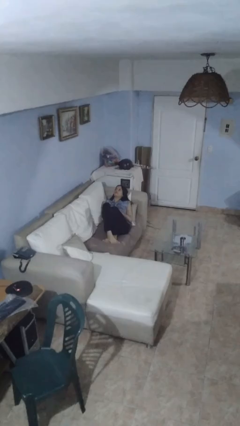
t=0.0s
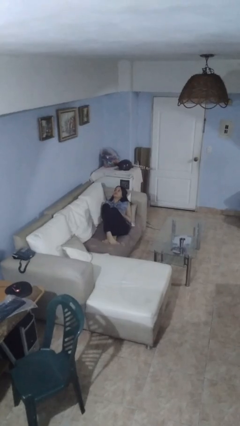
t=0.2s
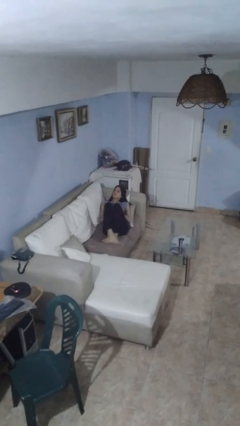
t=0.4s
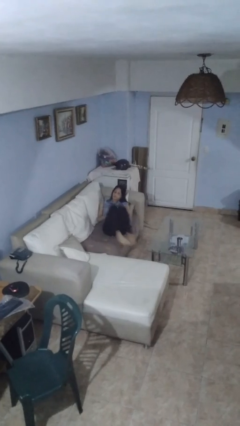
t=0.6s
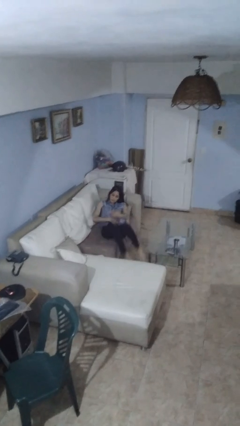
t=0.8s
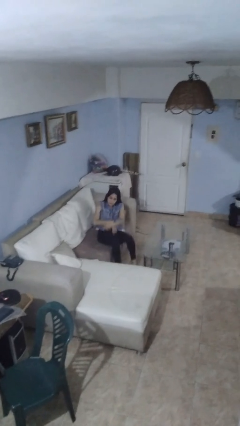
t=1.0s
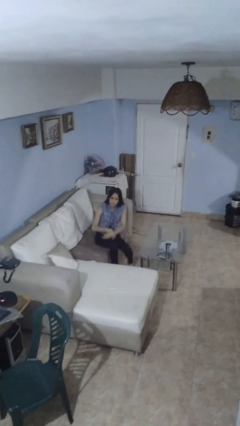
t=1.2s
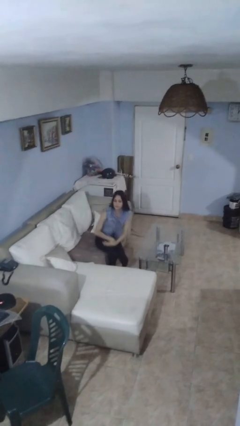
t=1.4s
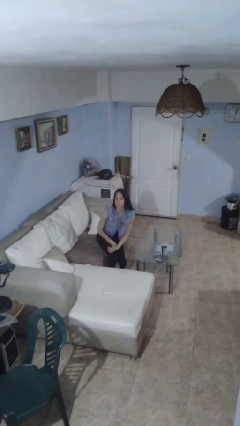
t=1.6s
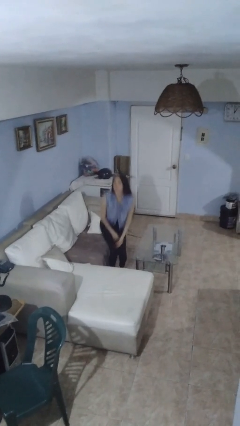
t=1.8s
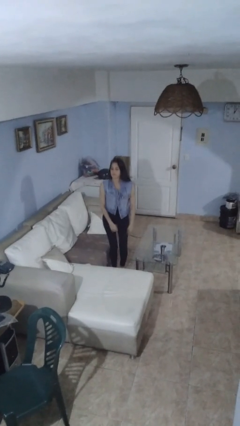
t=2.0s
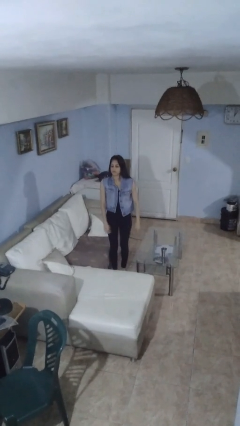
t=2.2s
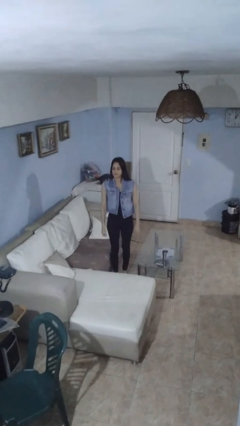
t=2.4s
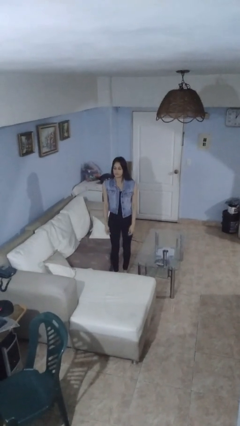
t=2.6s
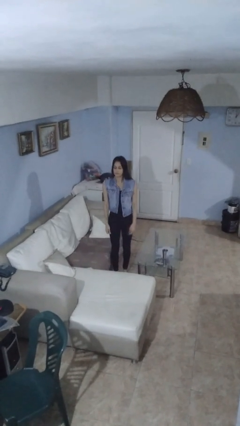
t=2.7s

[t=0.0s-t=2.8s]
person stands up

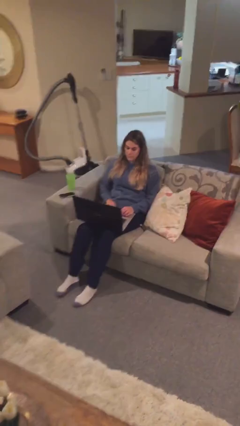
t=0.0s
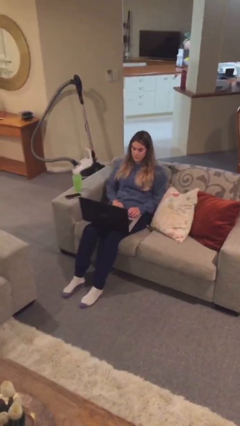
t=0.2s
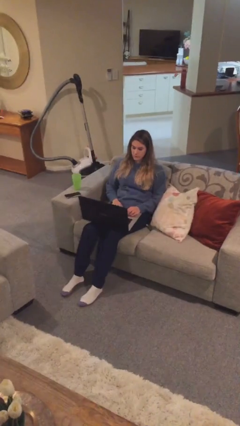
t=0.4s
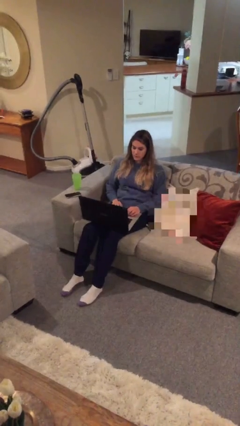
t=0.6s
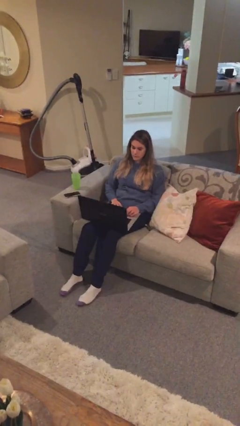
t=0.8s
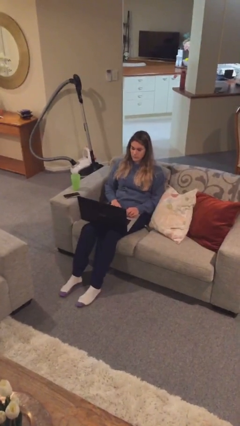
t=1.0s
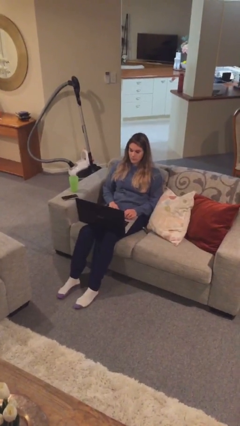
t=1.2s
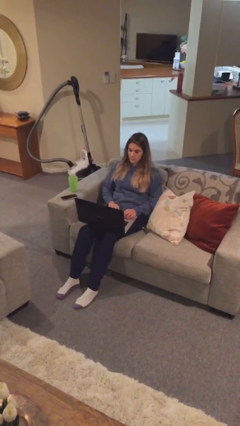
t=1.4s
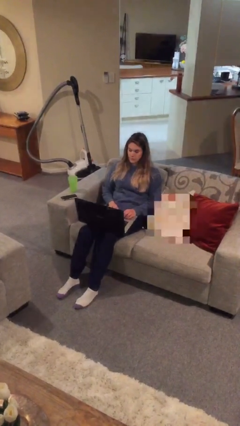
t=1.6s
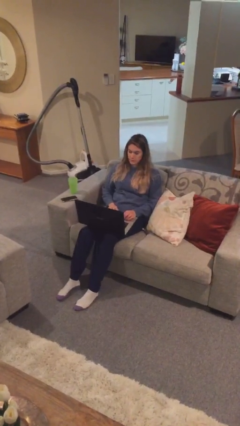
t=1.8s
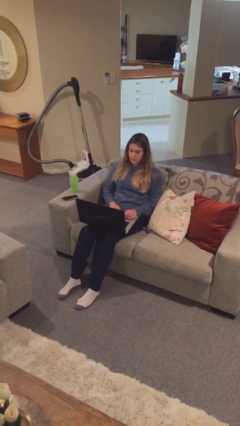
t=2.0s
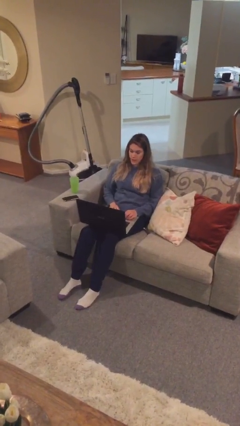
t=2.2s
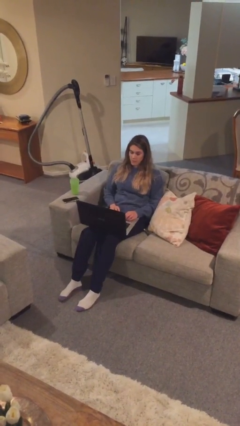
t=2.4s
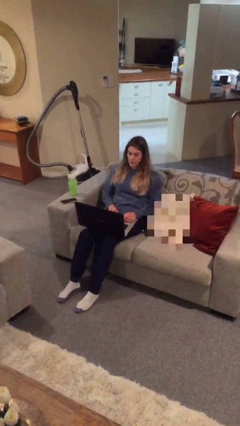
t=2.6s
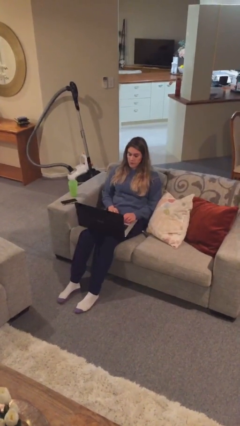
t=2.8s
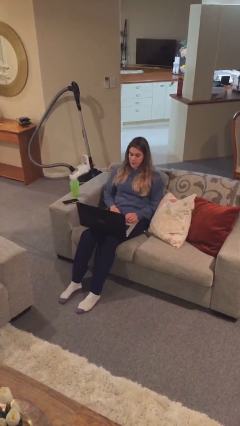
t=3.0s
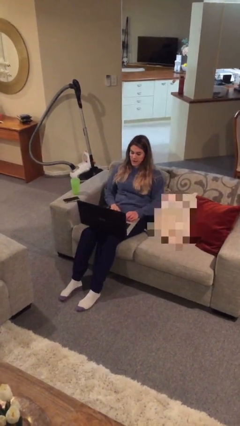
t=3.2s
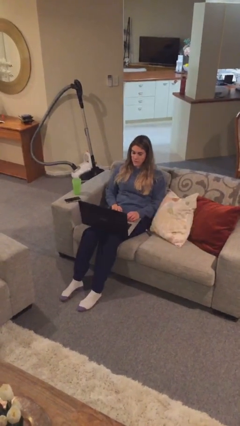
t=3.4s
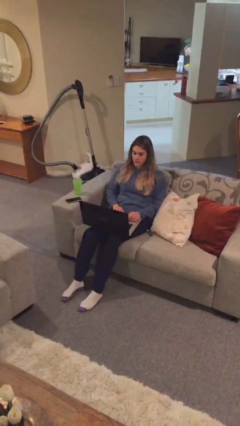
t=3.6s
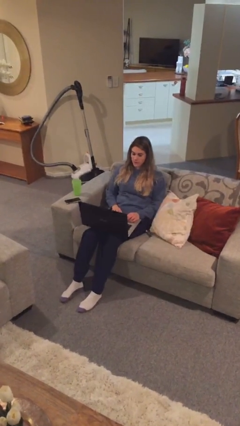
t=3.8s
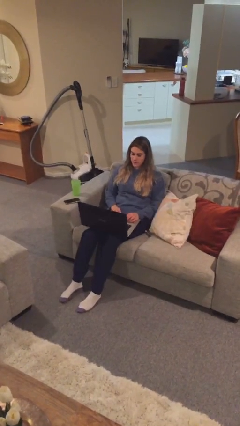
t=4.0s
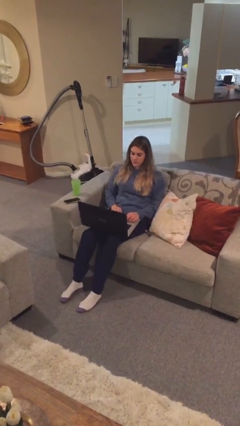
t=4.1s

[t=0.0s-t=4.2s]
person interacts with laptop

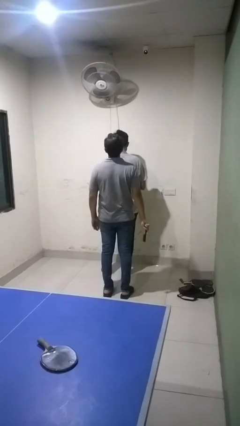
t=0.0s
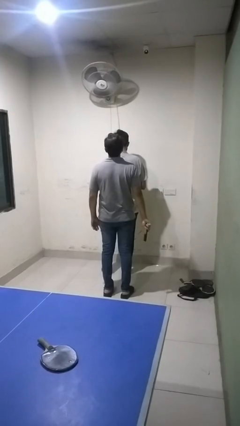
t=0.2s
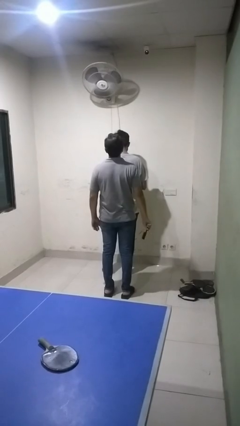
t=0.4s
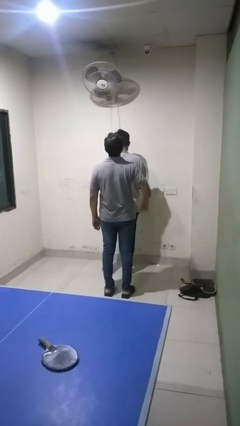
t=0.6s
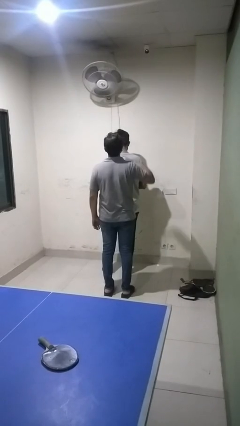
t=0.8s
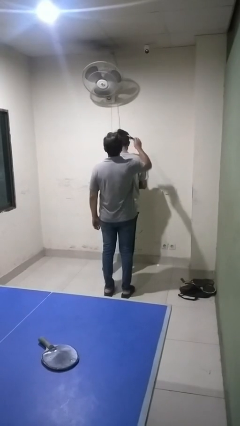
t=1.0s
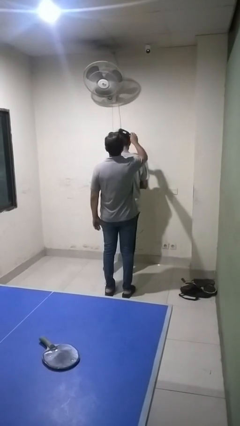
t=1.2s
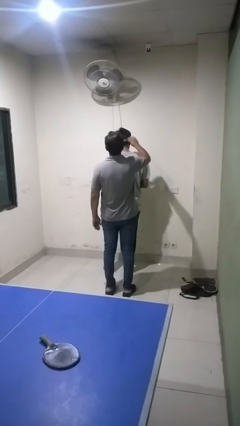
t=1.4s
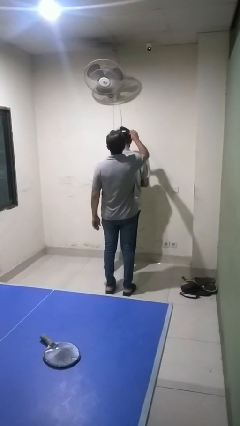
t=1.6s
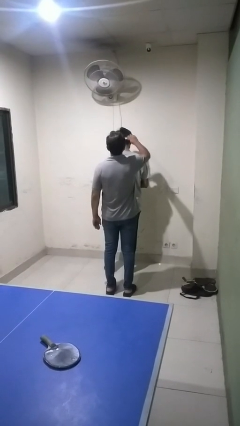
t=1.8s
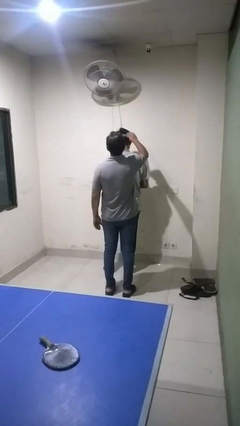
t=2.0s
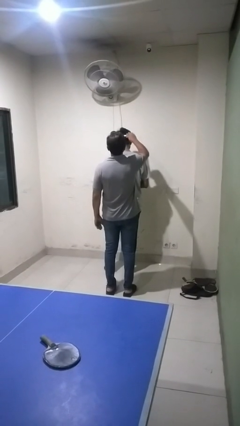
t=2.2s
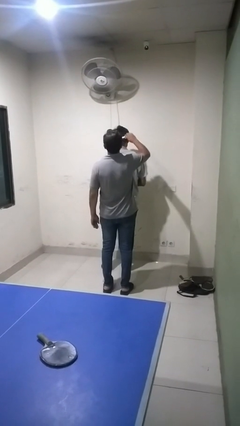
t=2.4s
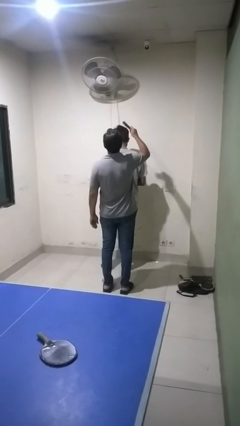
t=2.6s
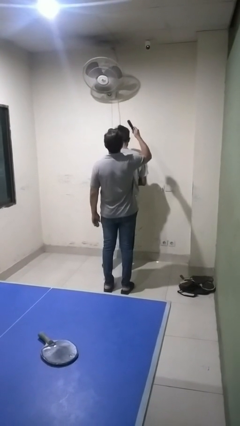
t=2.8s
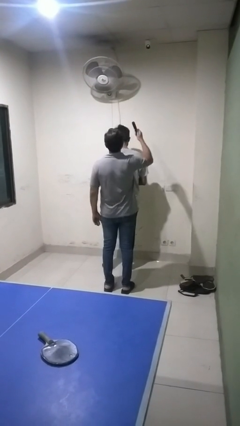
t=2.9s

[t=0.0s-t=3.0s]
person brushes hair of person

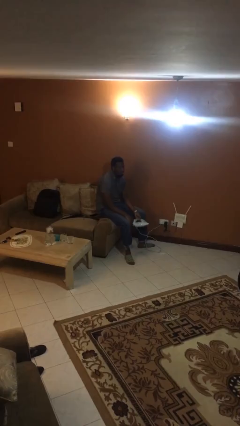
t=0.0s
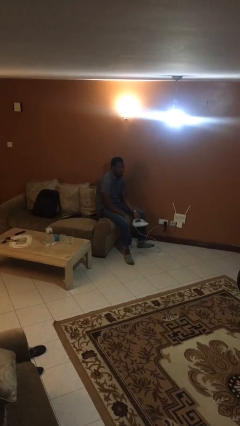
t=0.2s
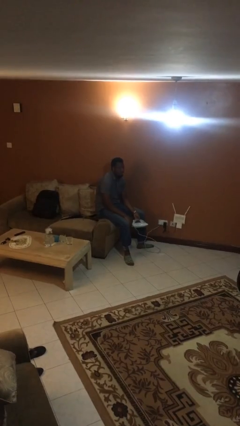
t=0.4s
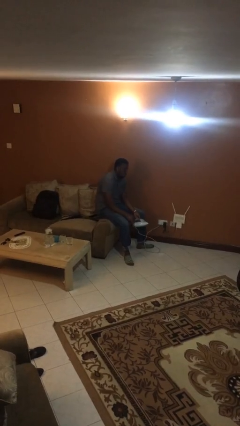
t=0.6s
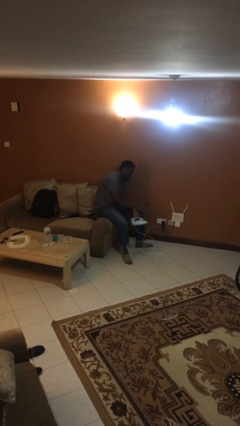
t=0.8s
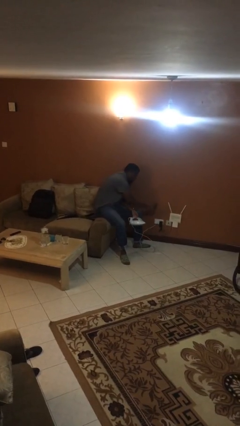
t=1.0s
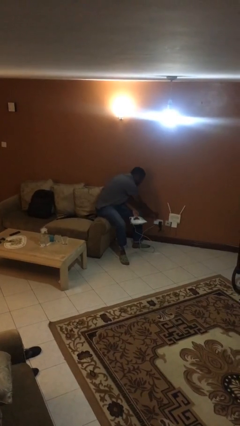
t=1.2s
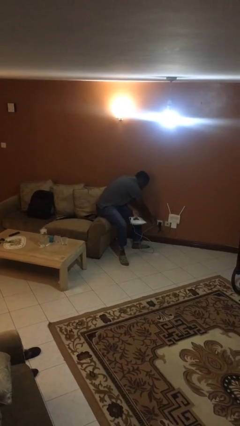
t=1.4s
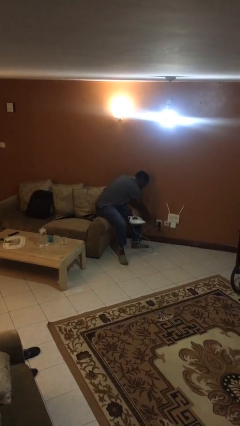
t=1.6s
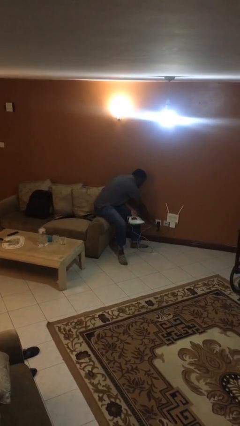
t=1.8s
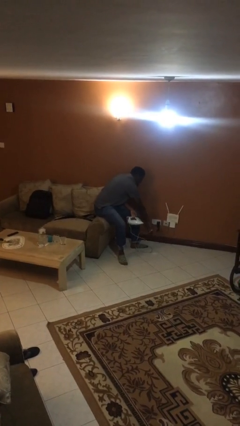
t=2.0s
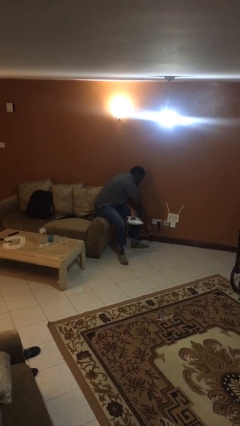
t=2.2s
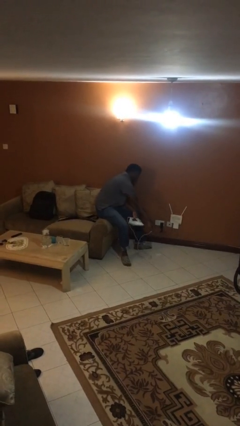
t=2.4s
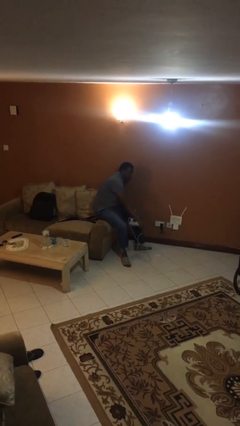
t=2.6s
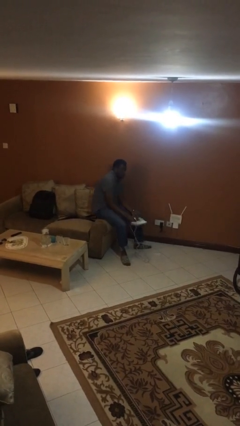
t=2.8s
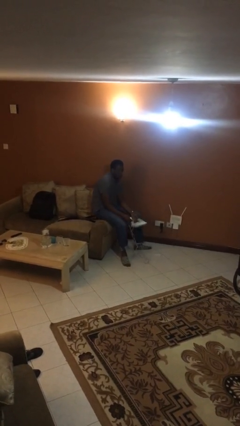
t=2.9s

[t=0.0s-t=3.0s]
person unplugs from electrical socket

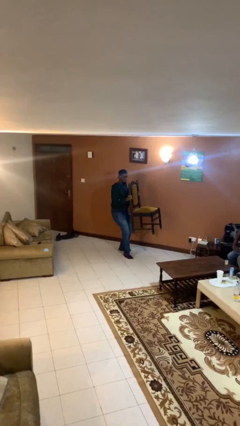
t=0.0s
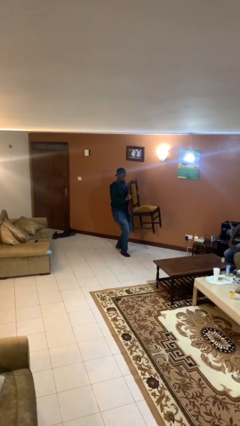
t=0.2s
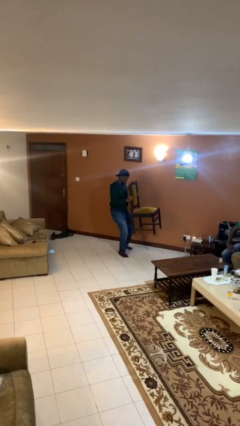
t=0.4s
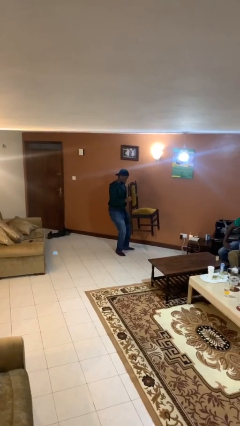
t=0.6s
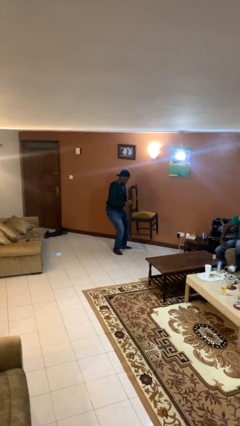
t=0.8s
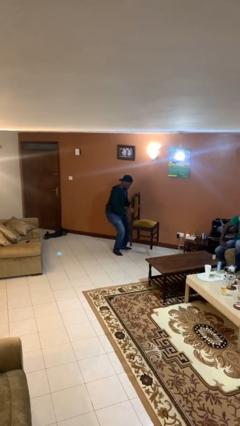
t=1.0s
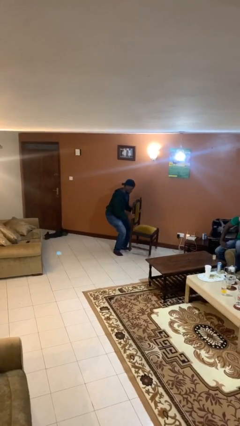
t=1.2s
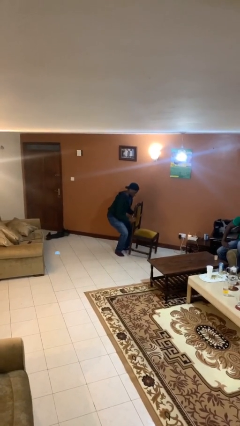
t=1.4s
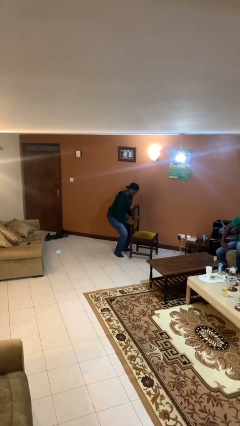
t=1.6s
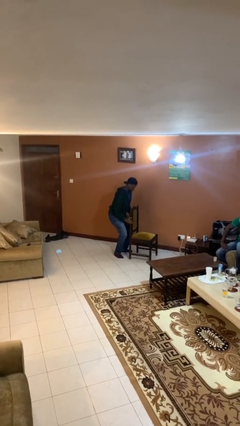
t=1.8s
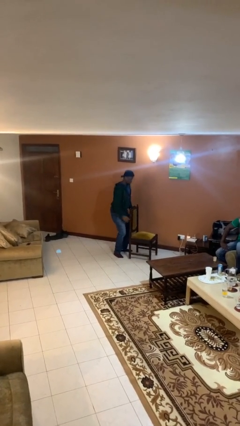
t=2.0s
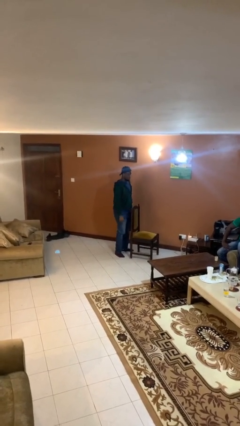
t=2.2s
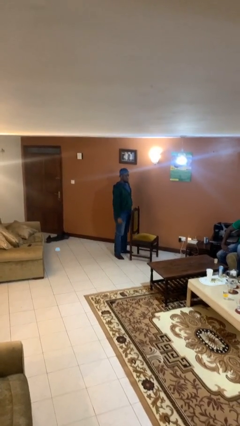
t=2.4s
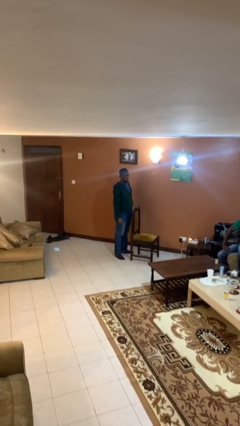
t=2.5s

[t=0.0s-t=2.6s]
person puts down object on floor

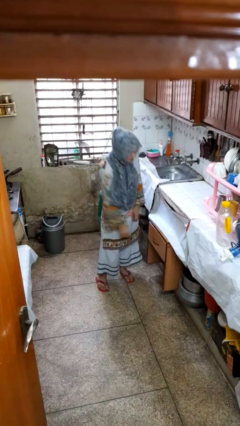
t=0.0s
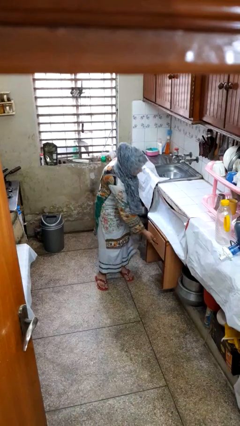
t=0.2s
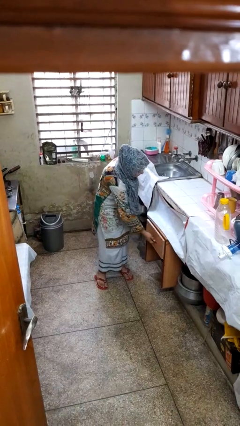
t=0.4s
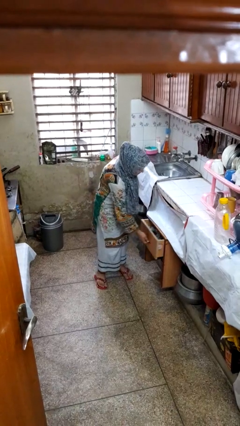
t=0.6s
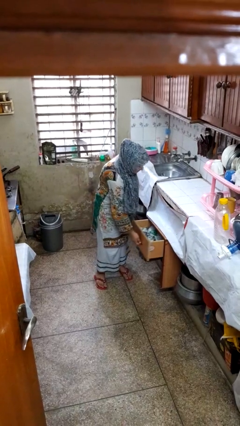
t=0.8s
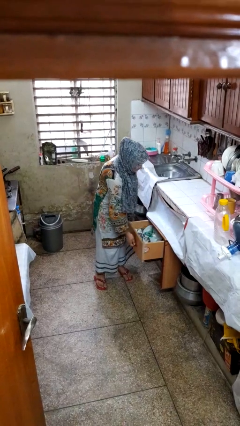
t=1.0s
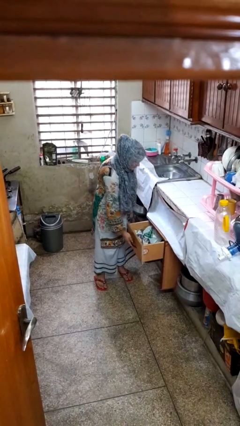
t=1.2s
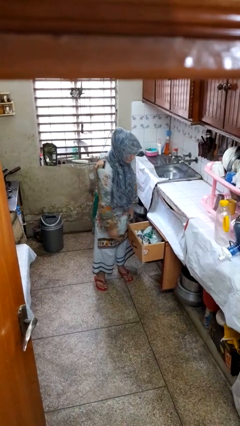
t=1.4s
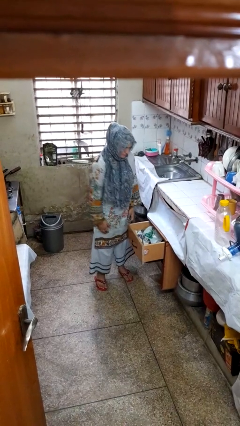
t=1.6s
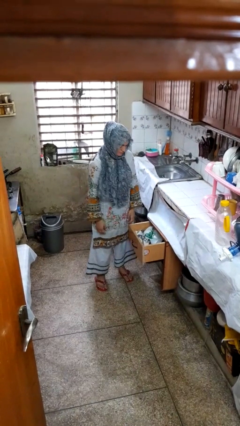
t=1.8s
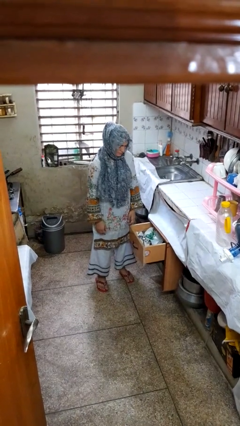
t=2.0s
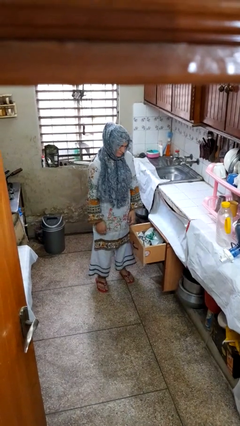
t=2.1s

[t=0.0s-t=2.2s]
person opens kitchen drawer
